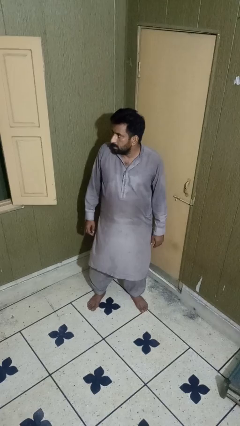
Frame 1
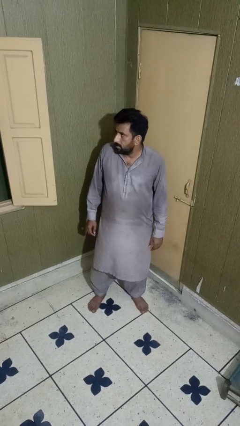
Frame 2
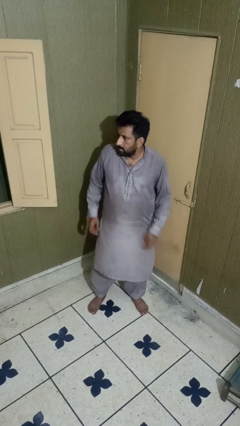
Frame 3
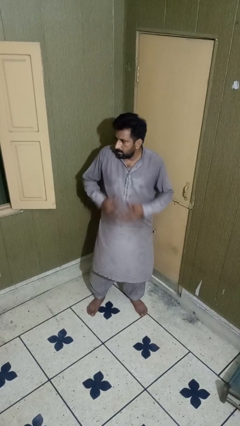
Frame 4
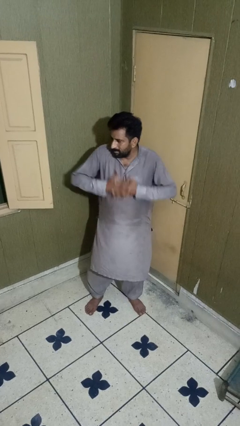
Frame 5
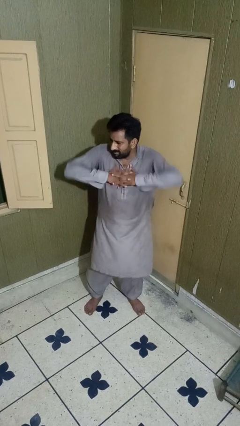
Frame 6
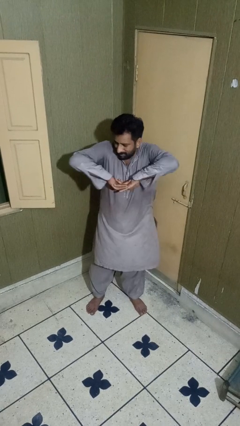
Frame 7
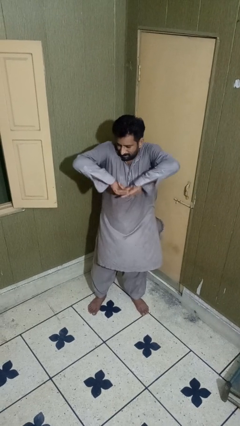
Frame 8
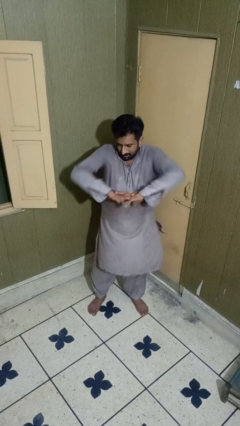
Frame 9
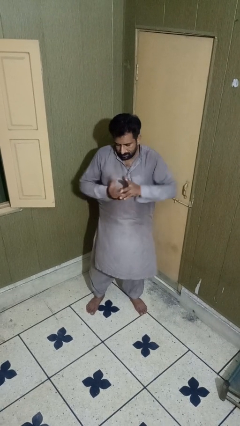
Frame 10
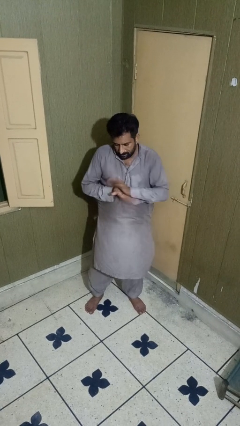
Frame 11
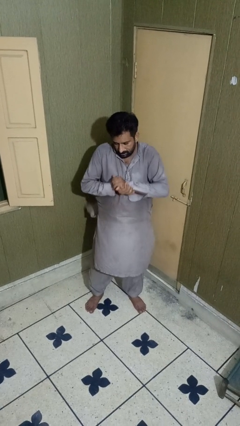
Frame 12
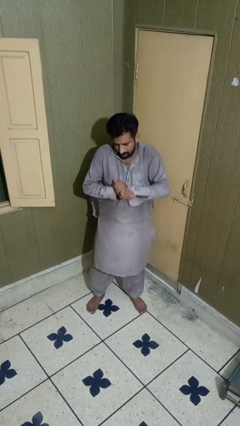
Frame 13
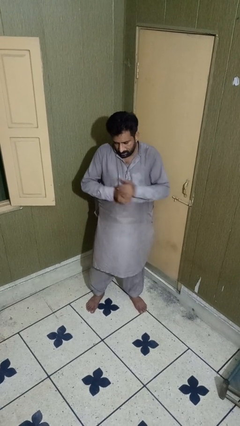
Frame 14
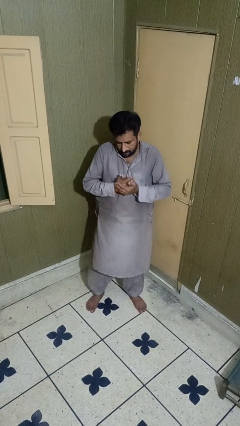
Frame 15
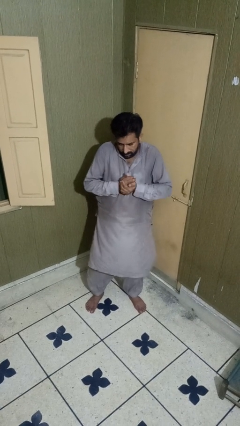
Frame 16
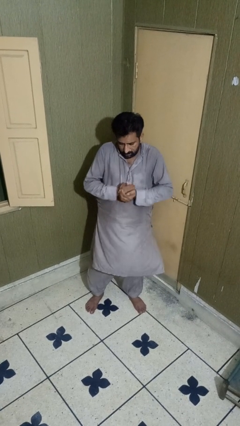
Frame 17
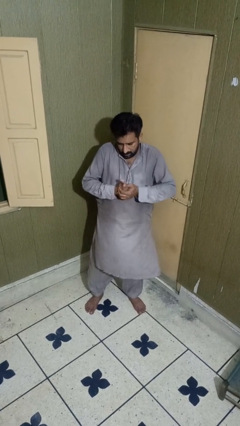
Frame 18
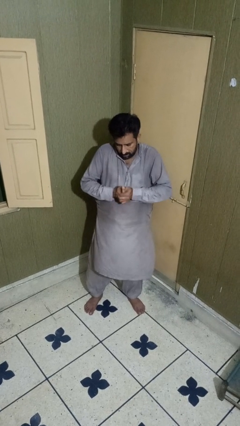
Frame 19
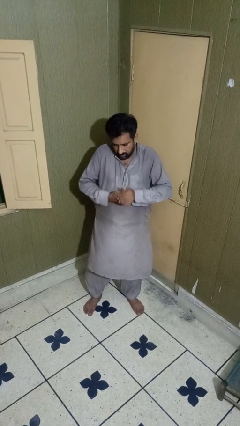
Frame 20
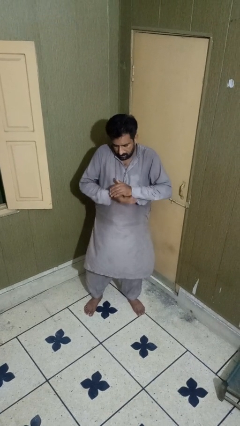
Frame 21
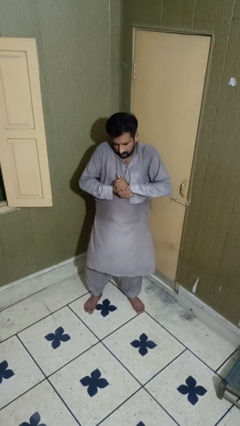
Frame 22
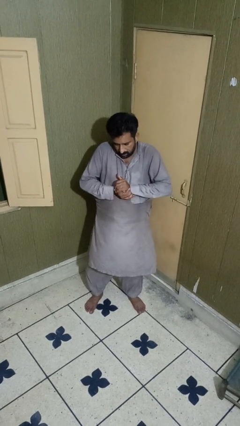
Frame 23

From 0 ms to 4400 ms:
person cracks knuckles

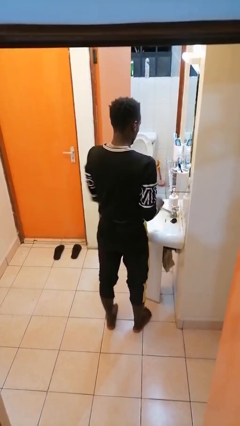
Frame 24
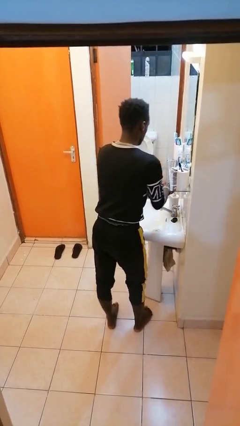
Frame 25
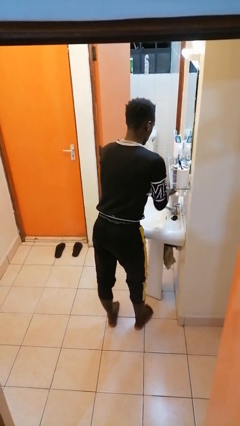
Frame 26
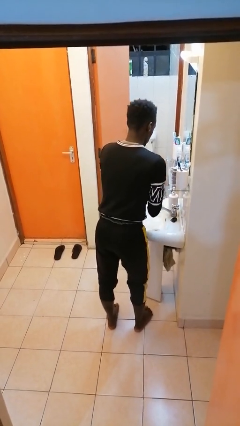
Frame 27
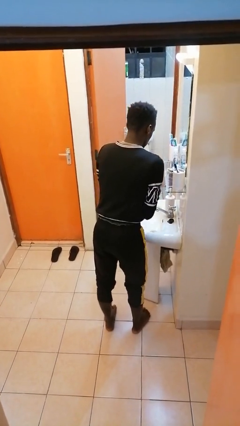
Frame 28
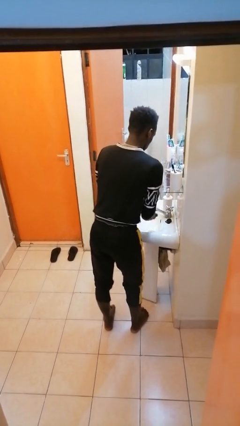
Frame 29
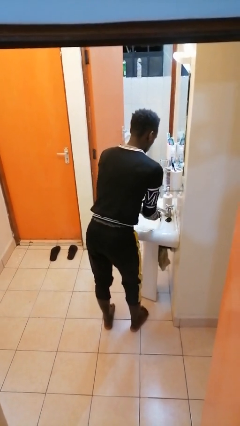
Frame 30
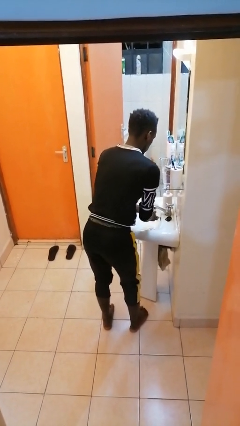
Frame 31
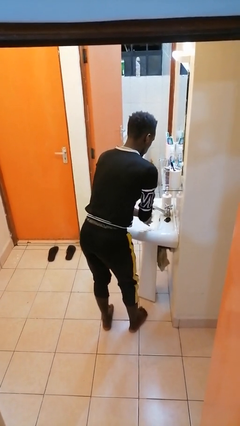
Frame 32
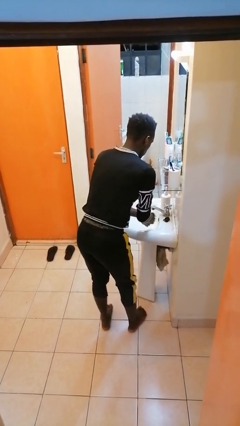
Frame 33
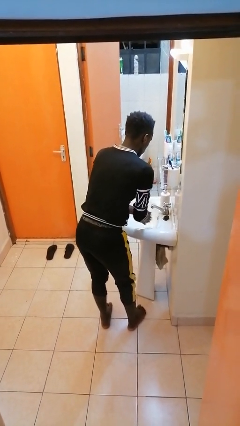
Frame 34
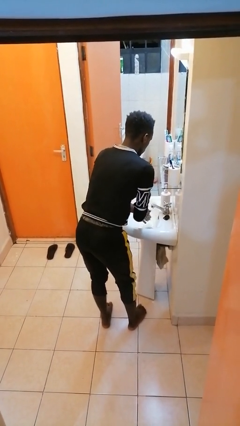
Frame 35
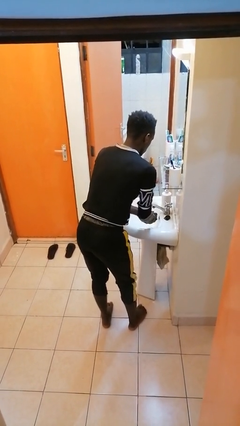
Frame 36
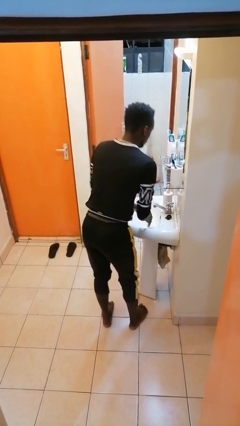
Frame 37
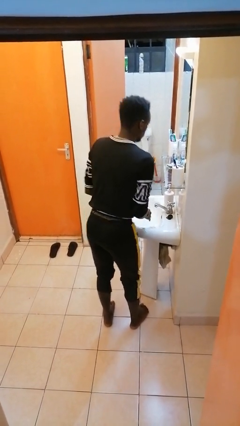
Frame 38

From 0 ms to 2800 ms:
person washes hands

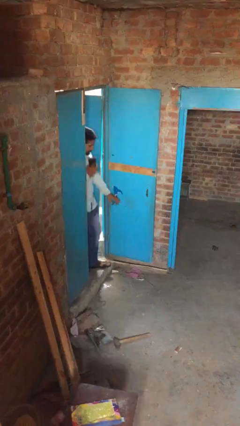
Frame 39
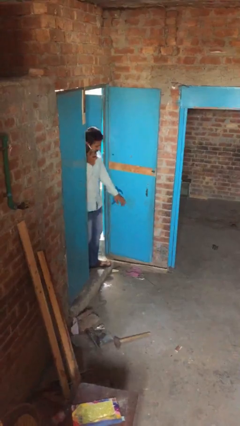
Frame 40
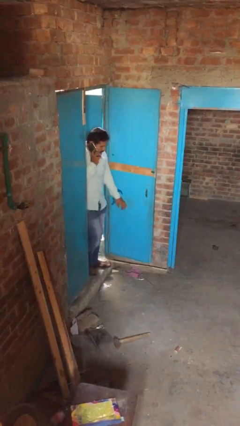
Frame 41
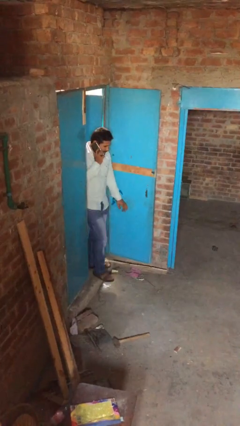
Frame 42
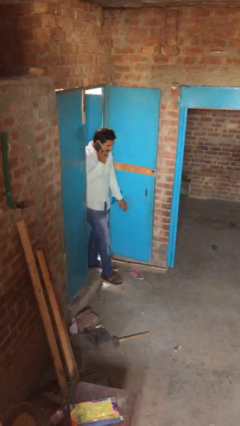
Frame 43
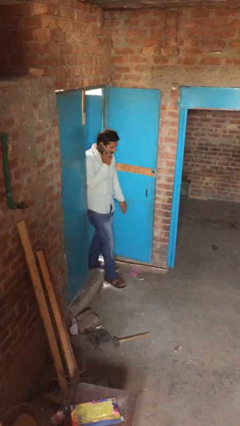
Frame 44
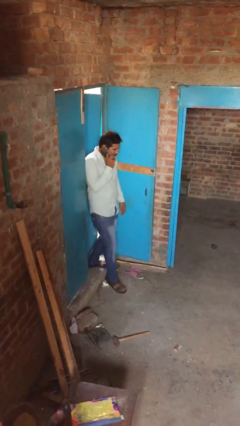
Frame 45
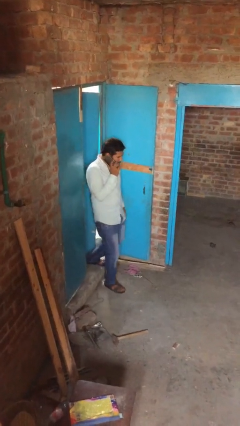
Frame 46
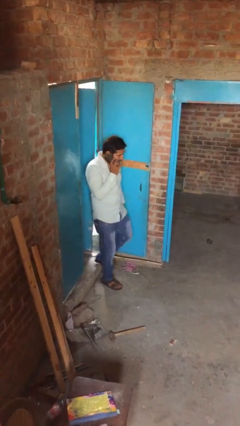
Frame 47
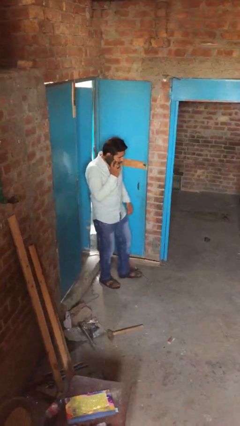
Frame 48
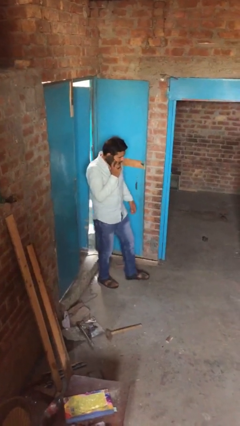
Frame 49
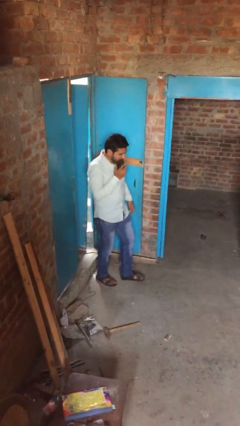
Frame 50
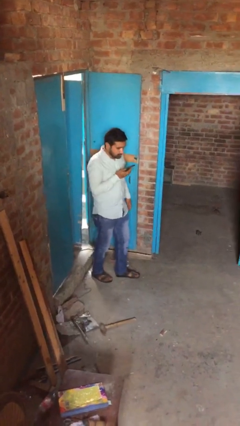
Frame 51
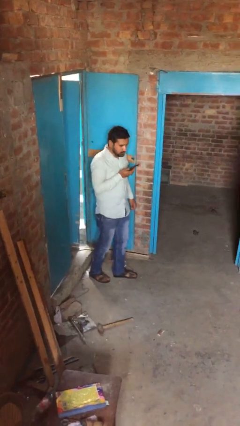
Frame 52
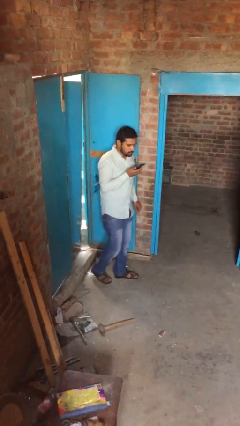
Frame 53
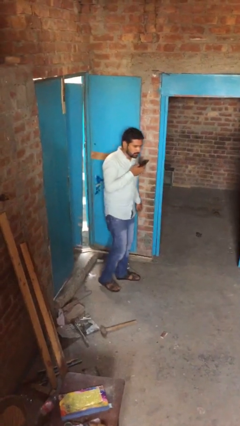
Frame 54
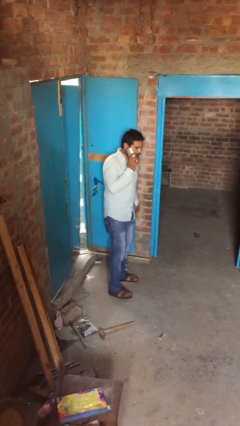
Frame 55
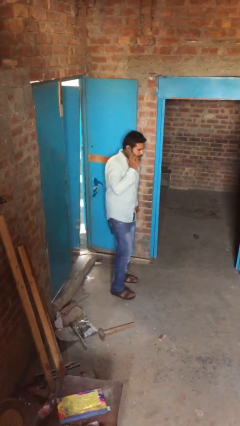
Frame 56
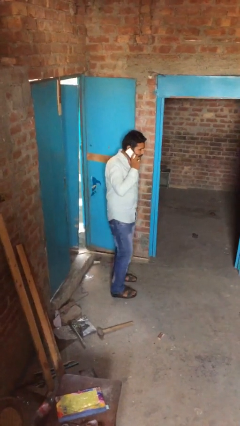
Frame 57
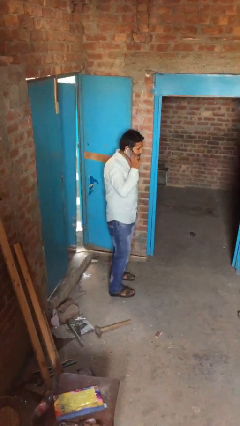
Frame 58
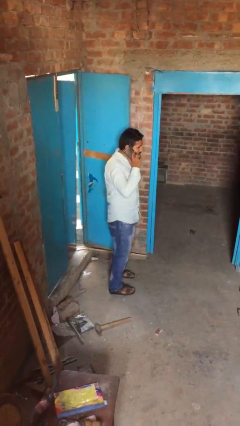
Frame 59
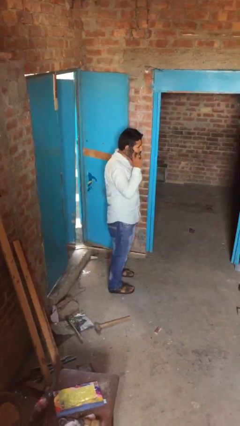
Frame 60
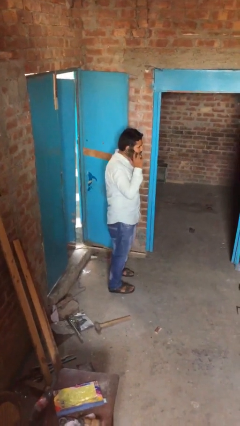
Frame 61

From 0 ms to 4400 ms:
person enters scene through structure

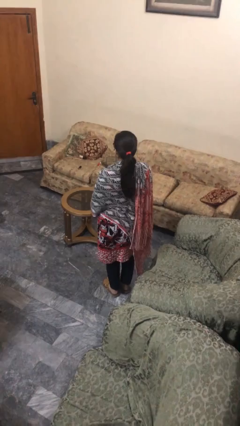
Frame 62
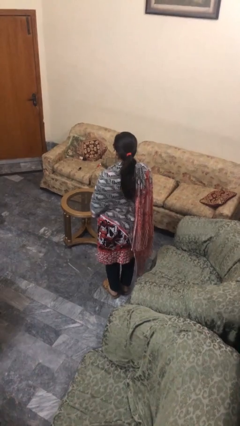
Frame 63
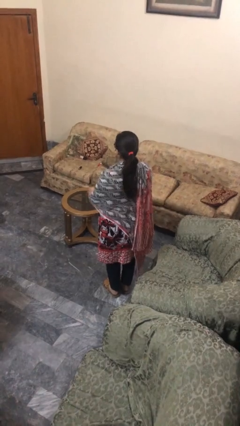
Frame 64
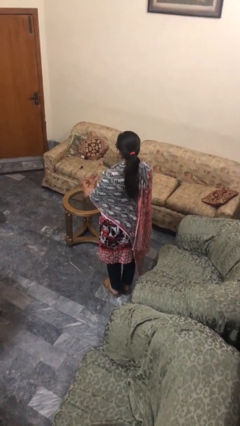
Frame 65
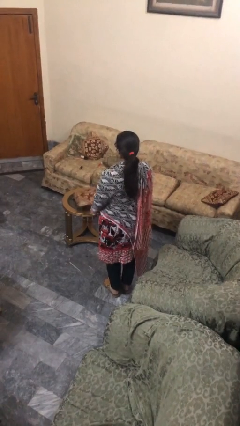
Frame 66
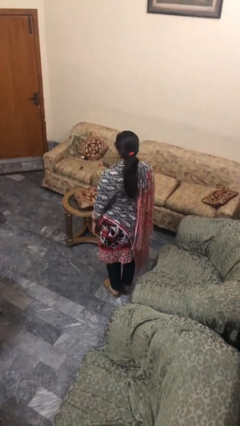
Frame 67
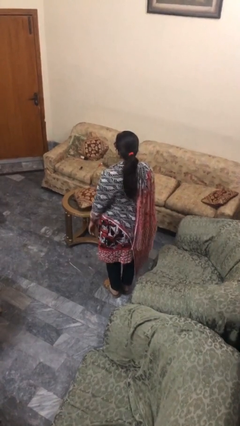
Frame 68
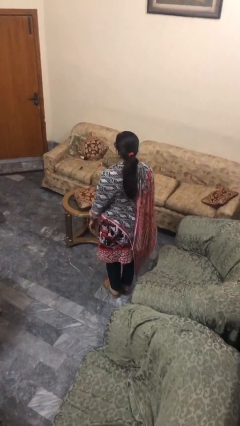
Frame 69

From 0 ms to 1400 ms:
person throws object on table

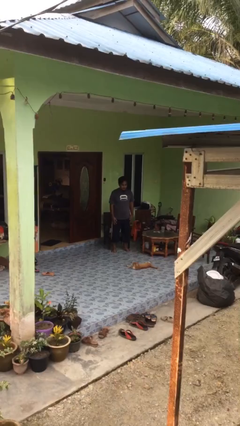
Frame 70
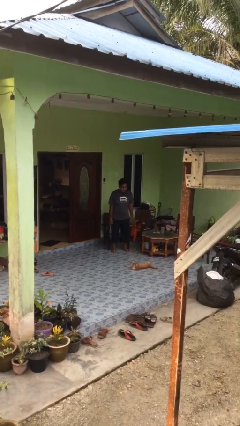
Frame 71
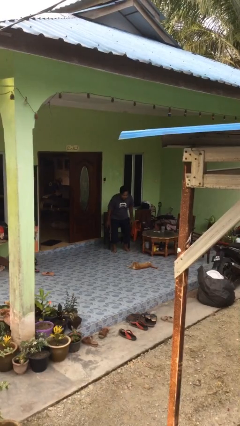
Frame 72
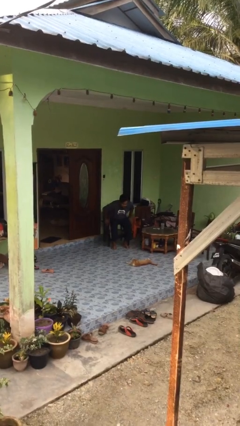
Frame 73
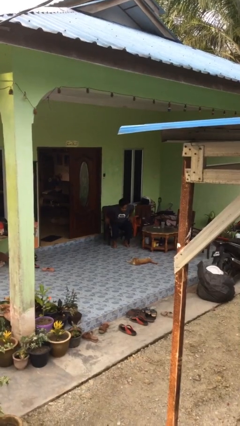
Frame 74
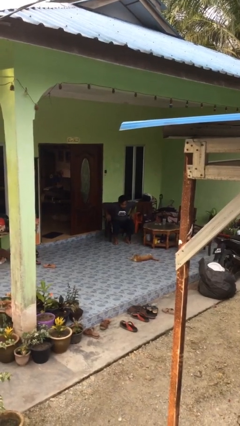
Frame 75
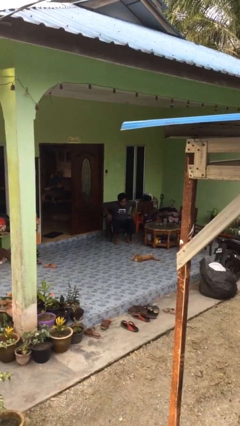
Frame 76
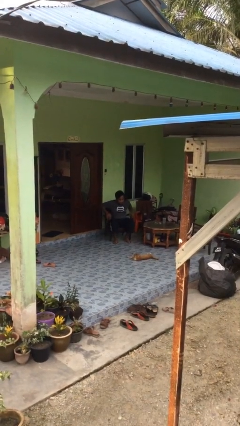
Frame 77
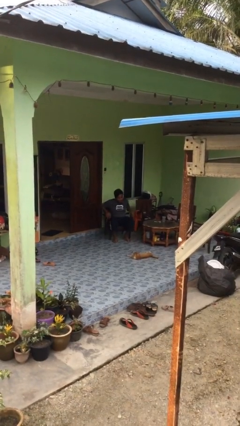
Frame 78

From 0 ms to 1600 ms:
person sits down

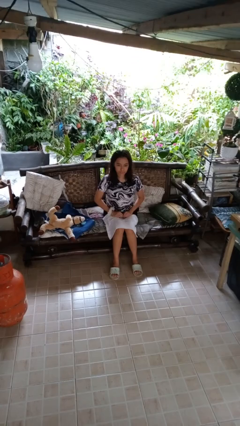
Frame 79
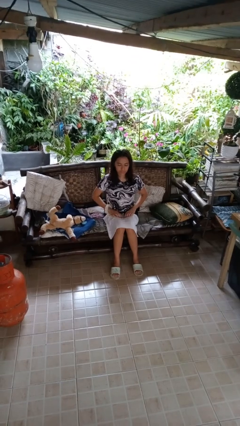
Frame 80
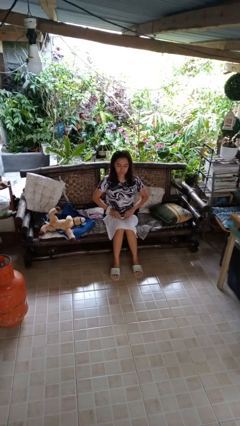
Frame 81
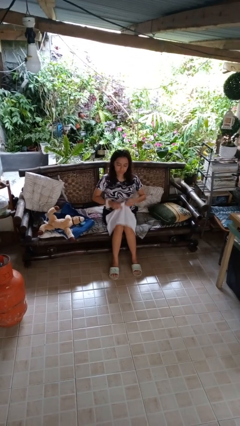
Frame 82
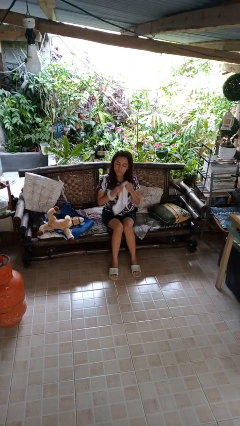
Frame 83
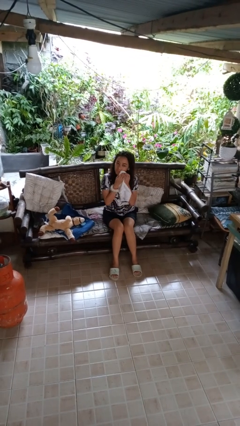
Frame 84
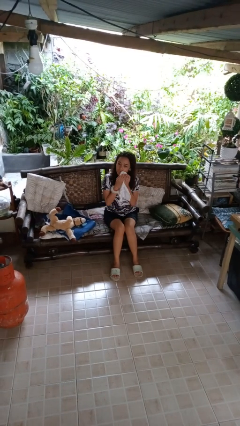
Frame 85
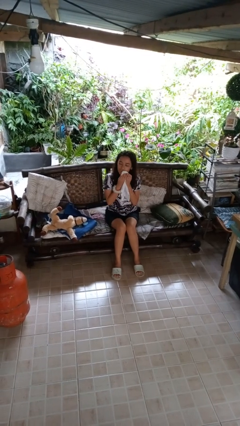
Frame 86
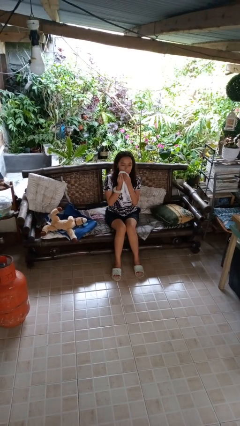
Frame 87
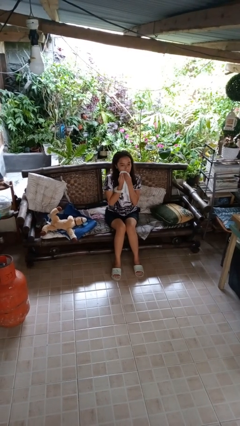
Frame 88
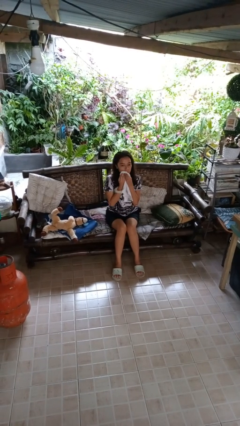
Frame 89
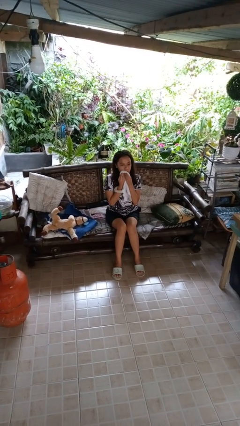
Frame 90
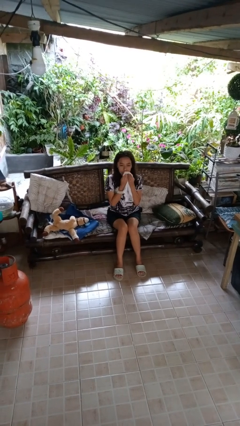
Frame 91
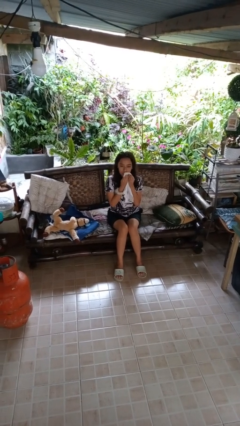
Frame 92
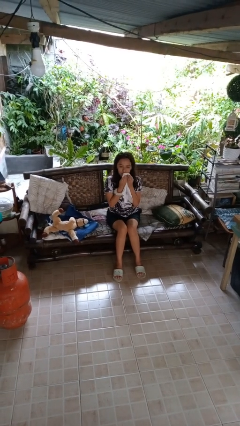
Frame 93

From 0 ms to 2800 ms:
person wipes mouth with napkin
